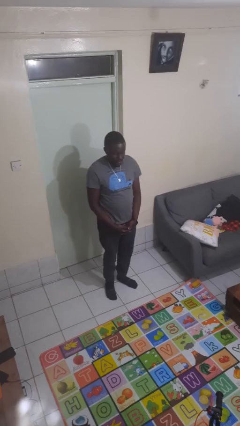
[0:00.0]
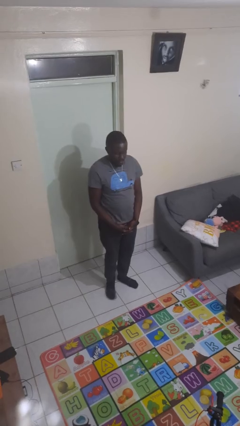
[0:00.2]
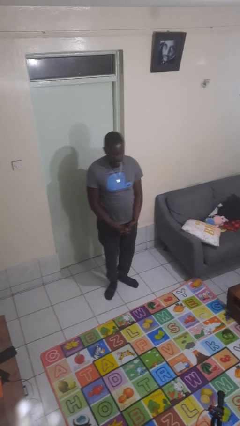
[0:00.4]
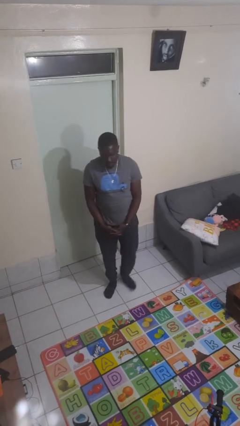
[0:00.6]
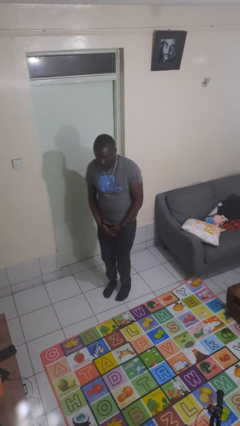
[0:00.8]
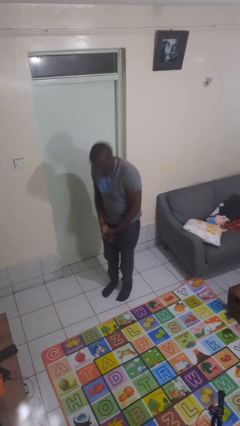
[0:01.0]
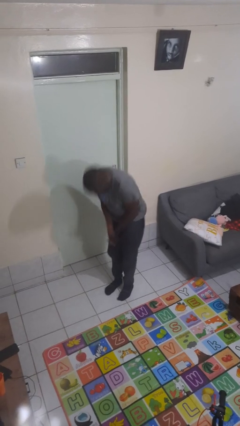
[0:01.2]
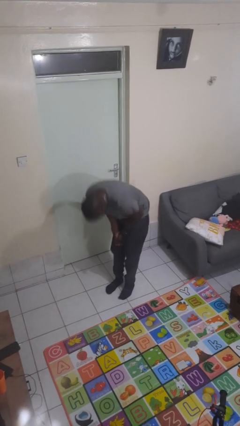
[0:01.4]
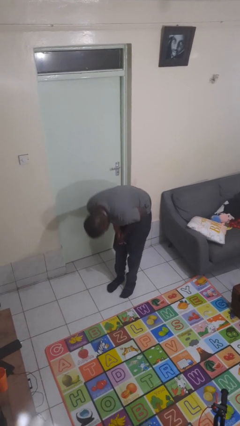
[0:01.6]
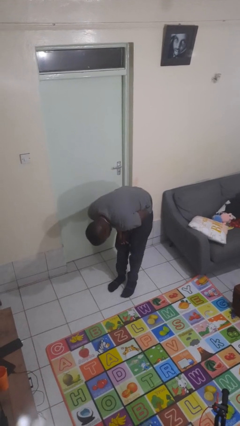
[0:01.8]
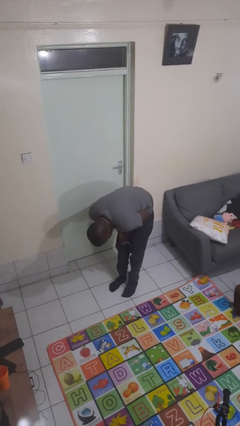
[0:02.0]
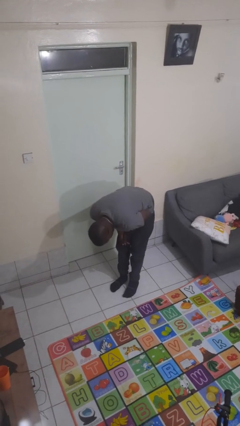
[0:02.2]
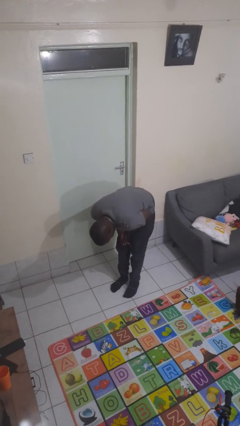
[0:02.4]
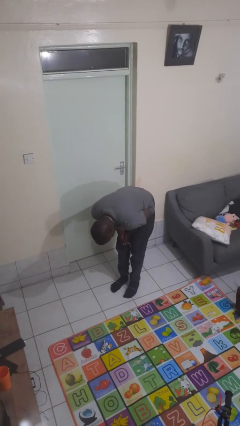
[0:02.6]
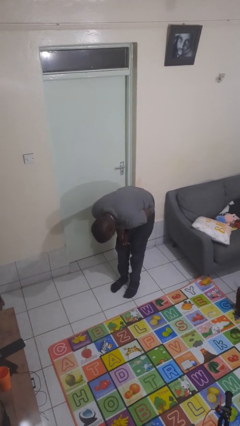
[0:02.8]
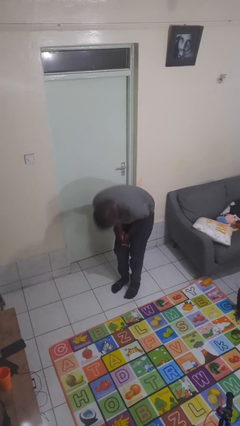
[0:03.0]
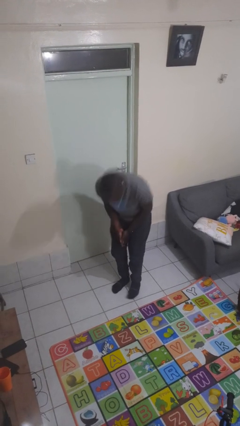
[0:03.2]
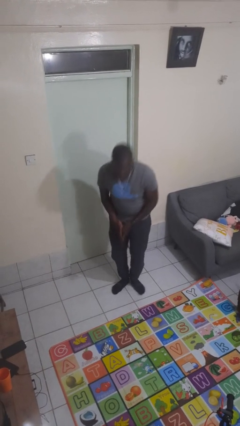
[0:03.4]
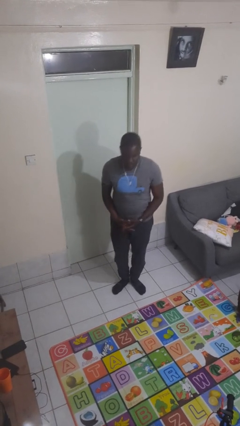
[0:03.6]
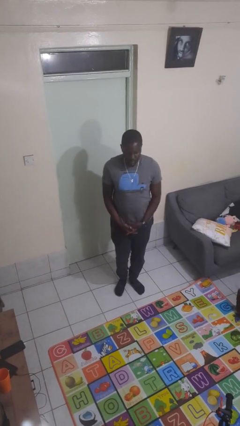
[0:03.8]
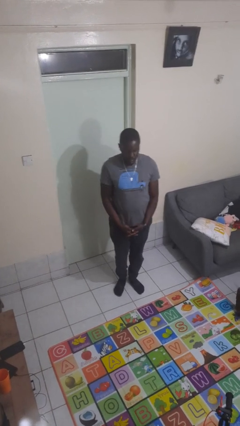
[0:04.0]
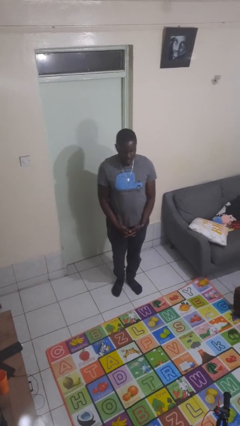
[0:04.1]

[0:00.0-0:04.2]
person bows

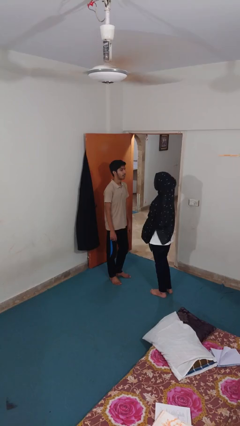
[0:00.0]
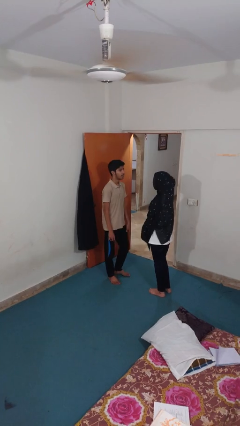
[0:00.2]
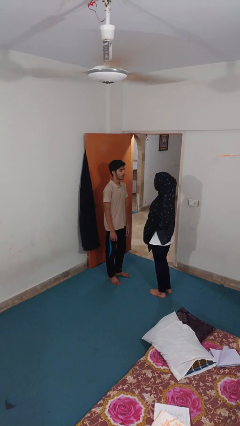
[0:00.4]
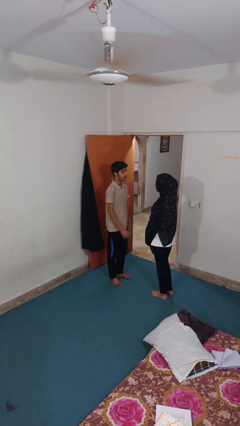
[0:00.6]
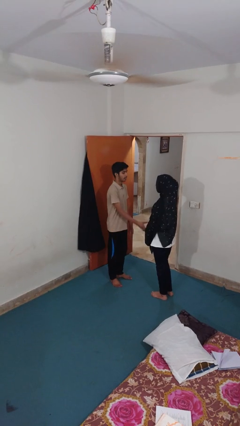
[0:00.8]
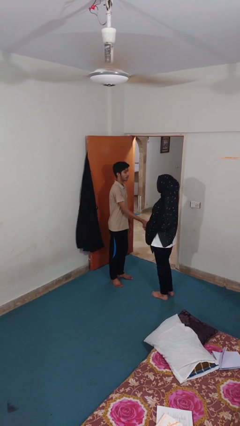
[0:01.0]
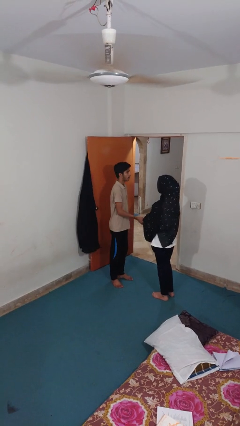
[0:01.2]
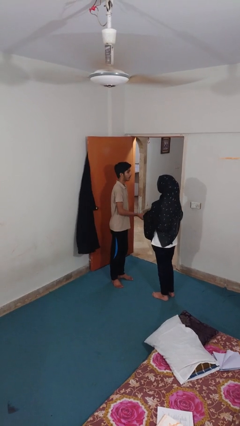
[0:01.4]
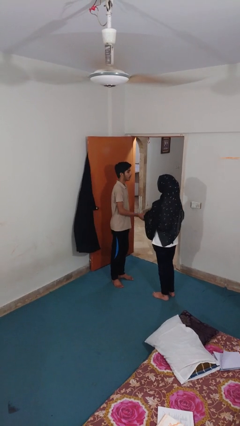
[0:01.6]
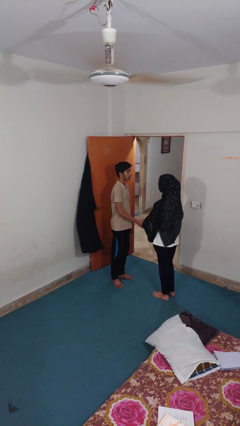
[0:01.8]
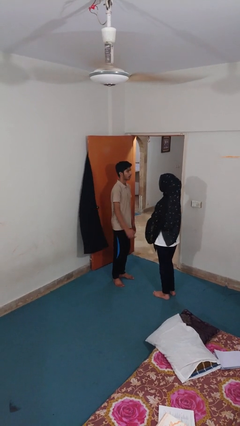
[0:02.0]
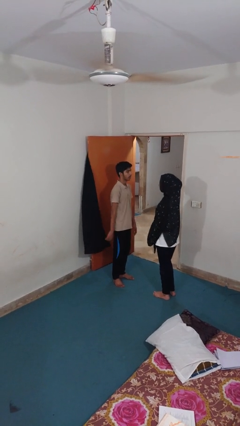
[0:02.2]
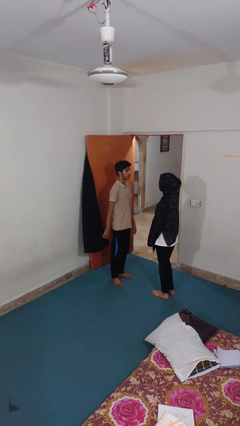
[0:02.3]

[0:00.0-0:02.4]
person grabs person by forearm

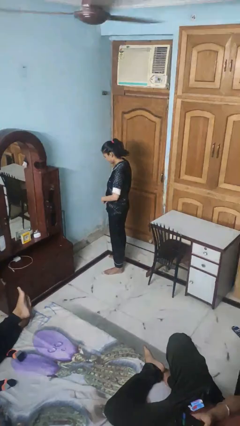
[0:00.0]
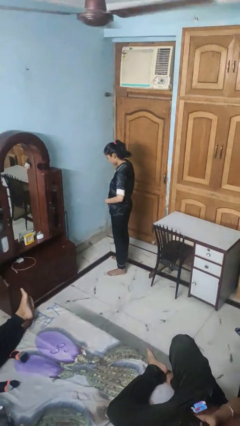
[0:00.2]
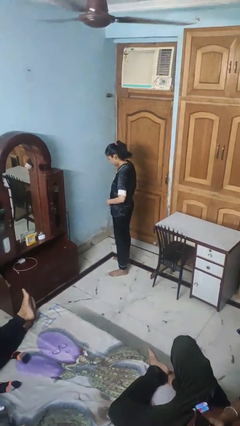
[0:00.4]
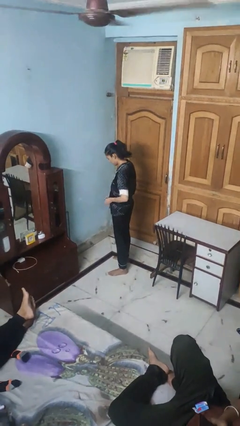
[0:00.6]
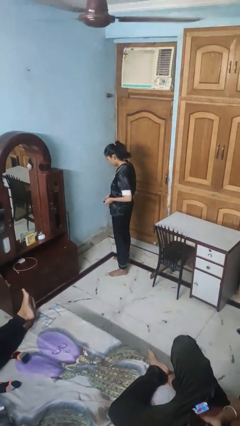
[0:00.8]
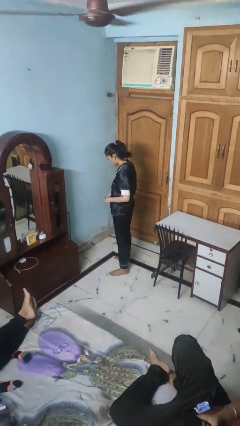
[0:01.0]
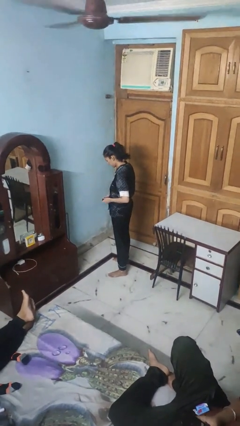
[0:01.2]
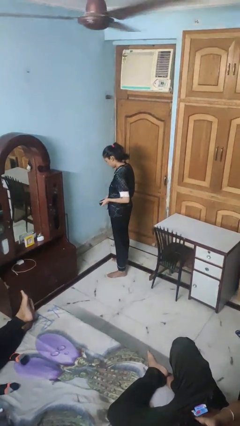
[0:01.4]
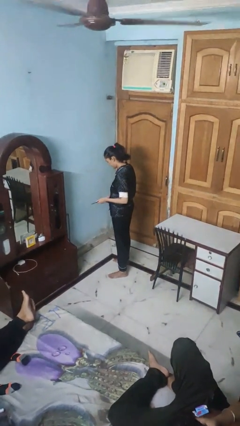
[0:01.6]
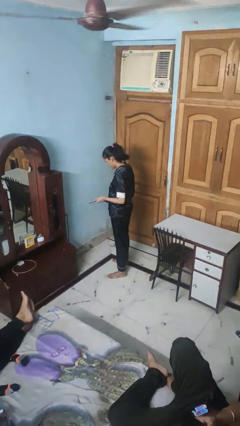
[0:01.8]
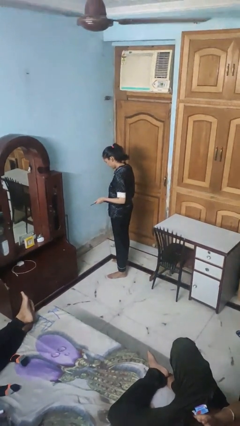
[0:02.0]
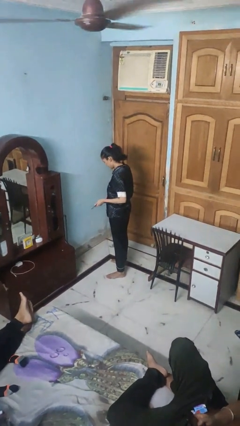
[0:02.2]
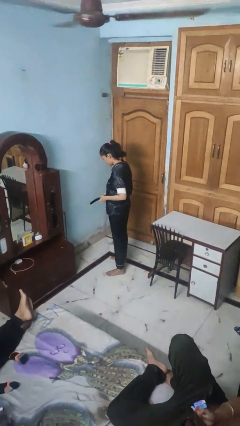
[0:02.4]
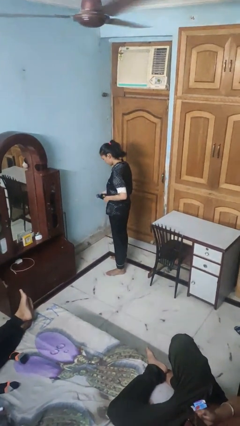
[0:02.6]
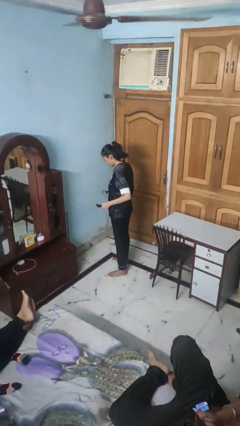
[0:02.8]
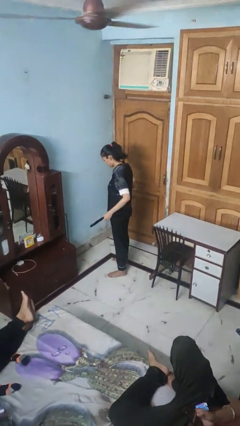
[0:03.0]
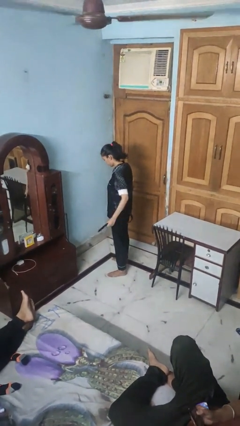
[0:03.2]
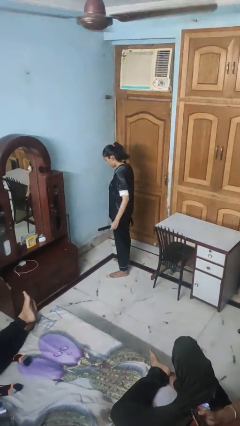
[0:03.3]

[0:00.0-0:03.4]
person takes off belt

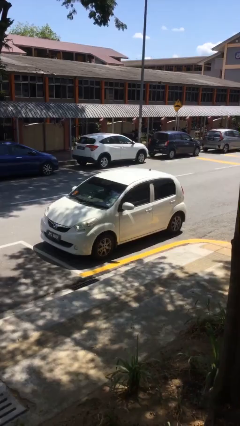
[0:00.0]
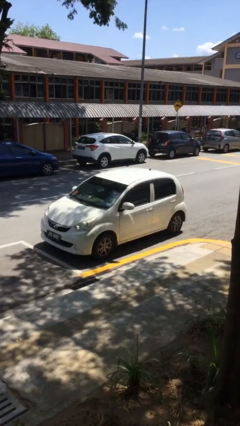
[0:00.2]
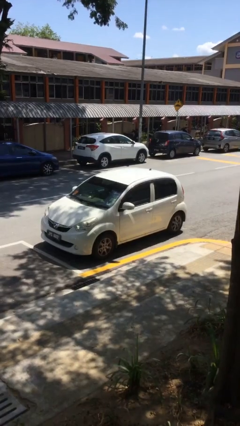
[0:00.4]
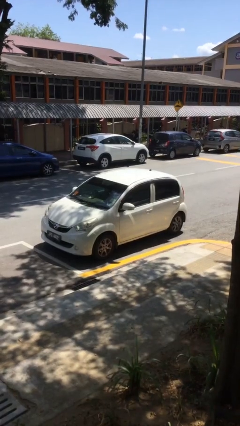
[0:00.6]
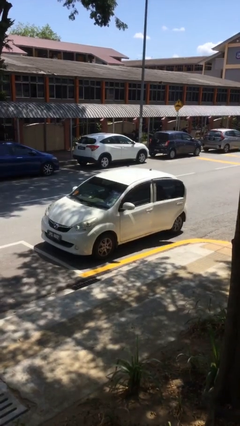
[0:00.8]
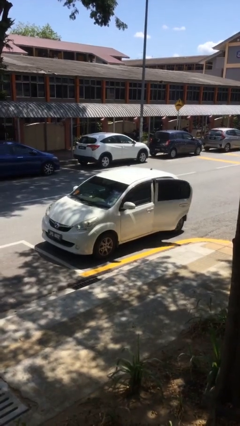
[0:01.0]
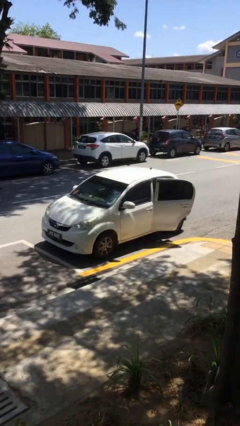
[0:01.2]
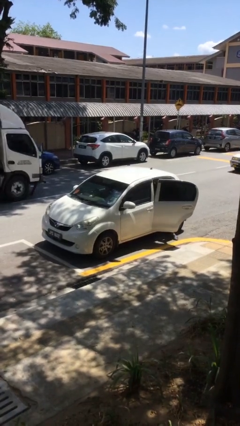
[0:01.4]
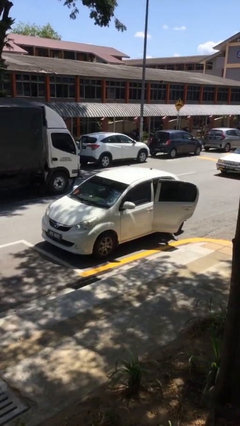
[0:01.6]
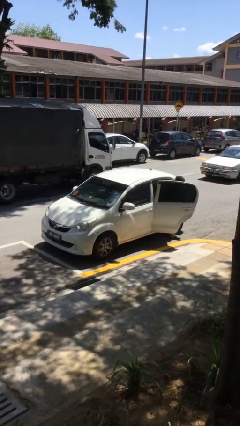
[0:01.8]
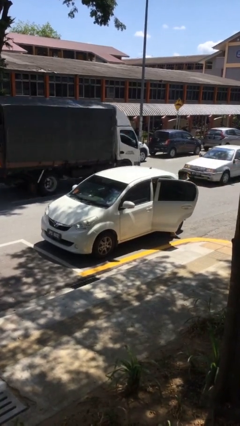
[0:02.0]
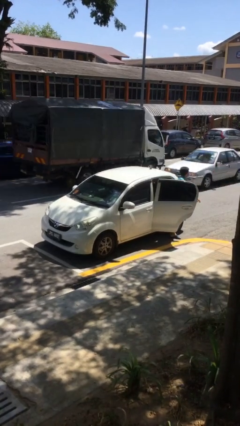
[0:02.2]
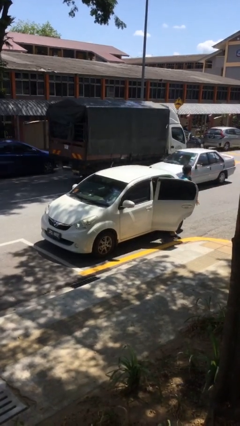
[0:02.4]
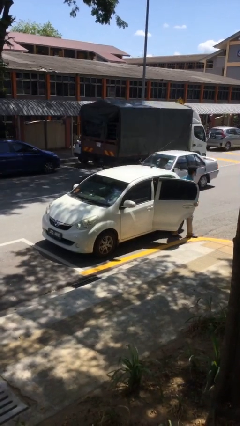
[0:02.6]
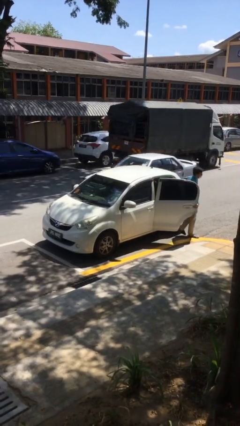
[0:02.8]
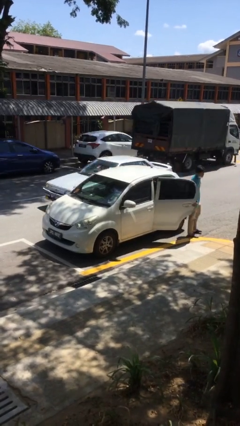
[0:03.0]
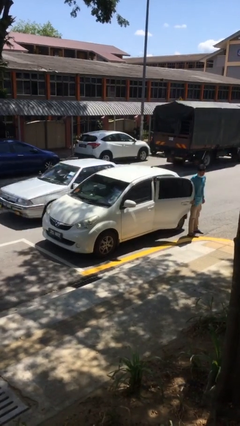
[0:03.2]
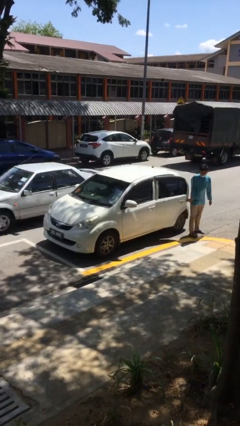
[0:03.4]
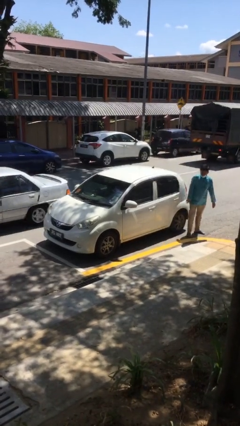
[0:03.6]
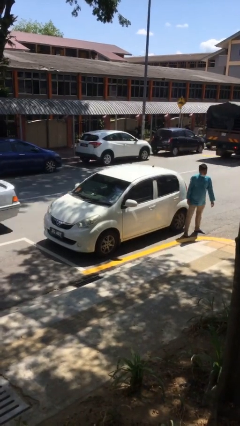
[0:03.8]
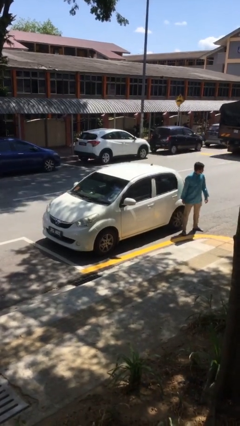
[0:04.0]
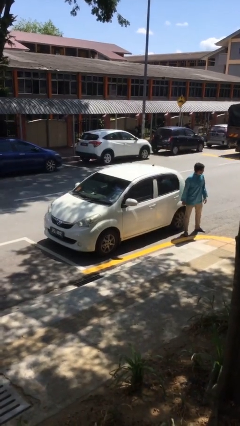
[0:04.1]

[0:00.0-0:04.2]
car drops off person

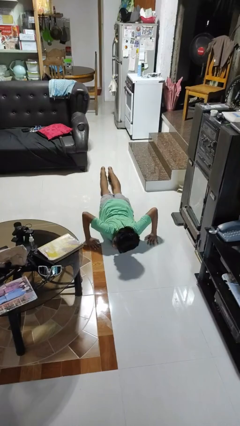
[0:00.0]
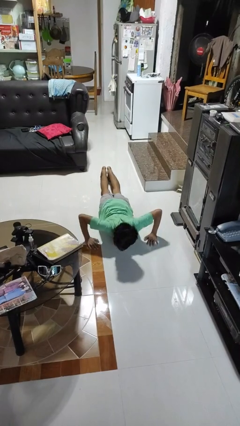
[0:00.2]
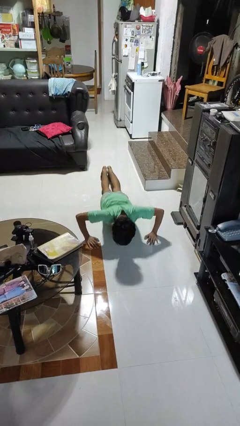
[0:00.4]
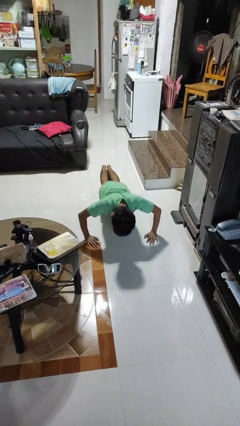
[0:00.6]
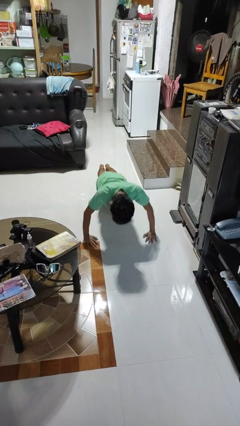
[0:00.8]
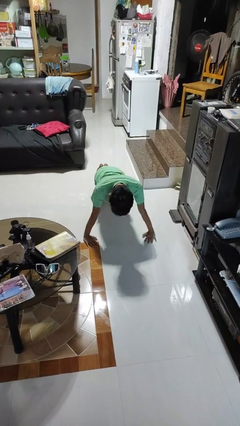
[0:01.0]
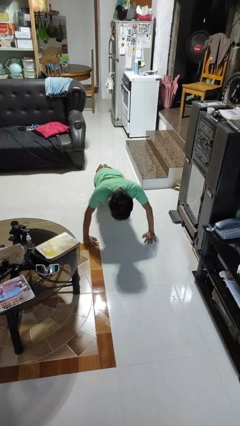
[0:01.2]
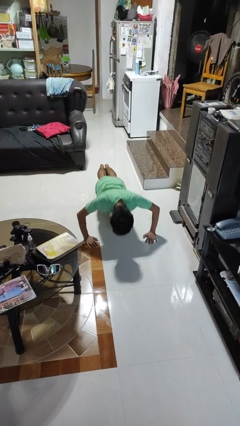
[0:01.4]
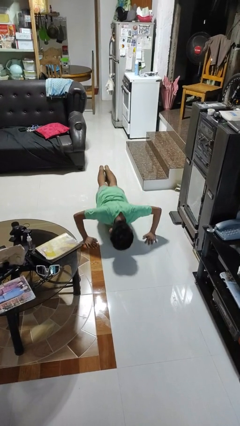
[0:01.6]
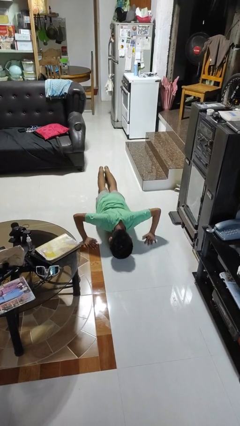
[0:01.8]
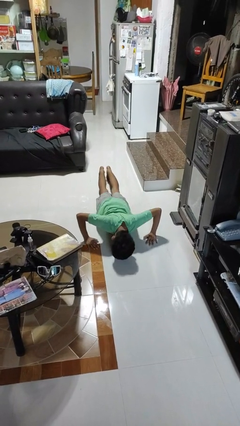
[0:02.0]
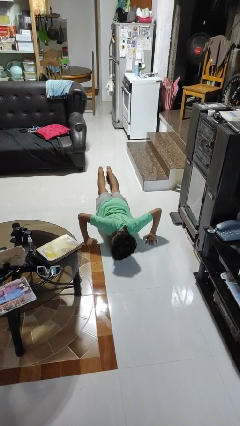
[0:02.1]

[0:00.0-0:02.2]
person exercises with pushup

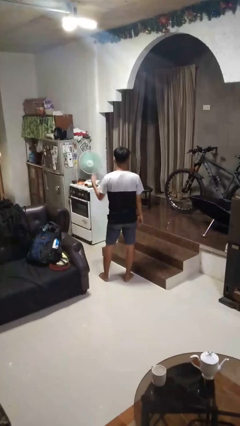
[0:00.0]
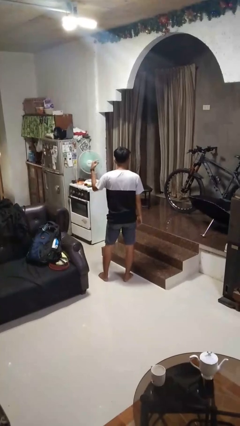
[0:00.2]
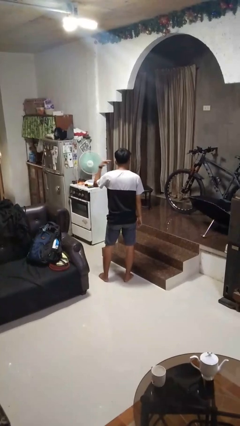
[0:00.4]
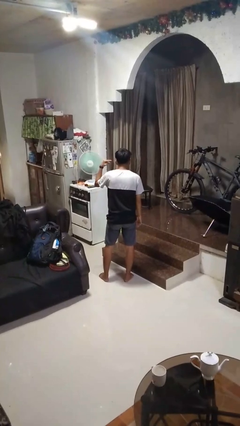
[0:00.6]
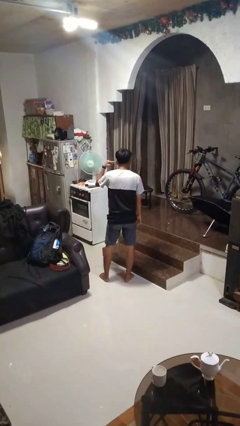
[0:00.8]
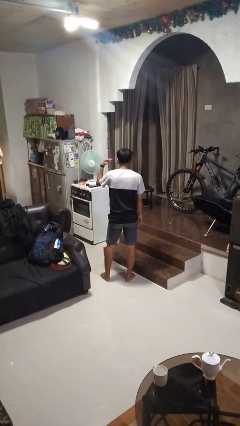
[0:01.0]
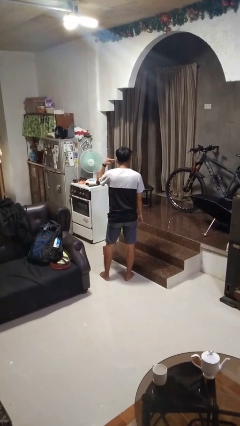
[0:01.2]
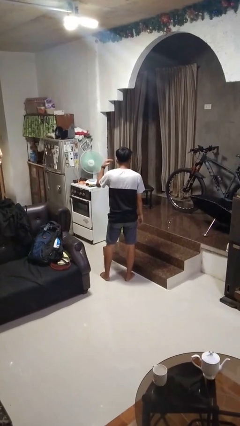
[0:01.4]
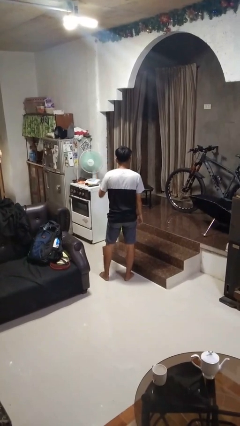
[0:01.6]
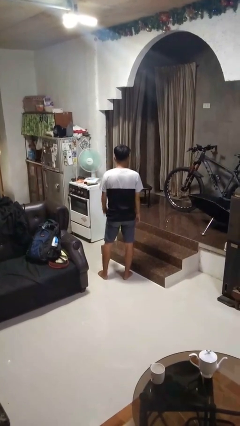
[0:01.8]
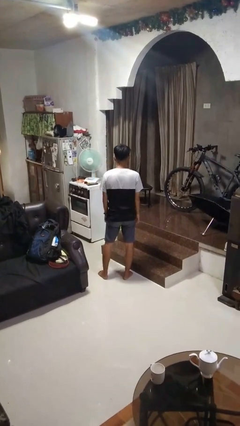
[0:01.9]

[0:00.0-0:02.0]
person gestures listen closely
